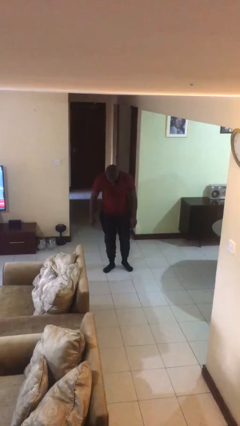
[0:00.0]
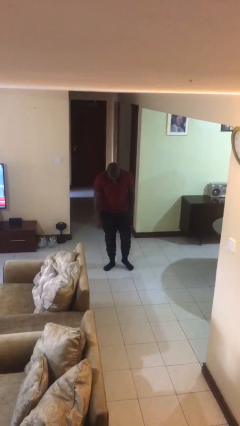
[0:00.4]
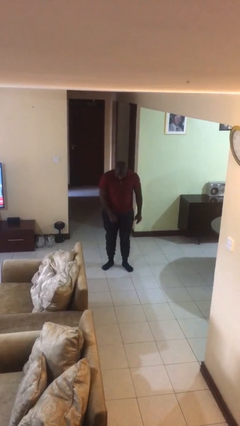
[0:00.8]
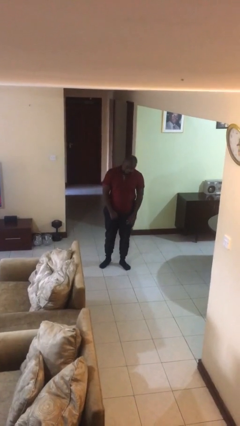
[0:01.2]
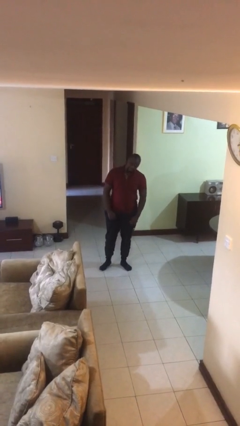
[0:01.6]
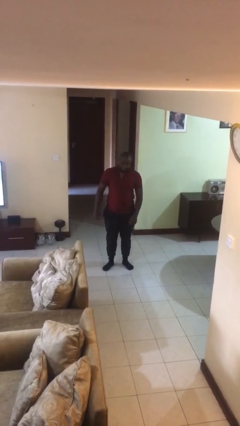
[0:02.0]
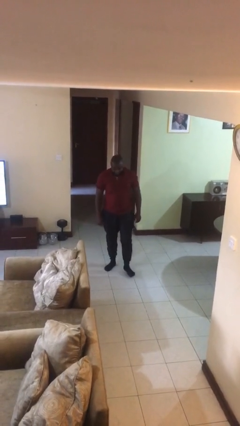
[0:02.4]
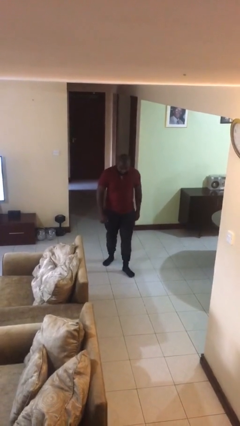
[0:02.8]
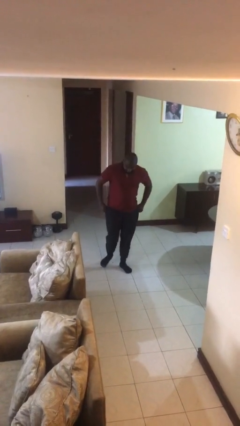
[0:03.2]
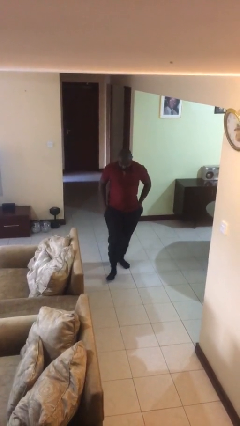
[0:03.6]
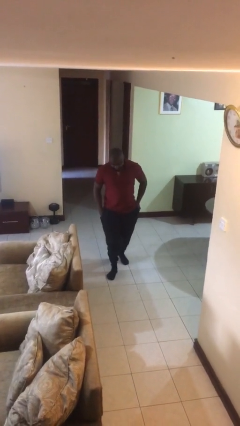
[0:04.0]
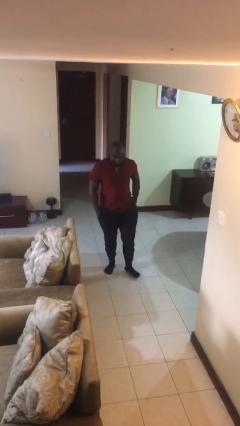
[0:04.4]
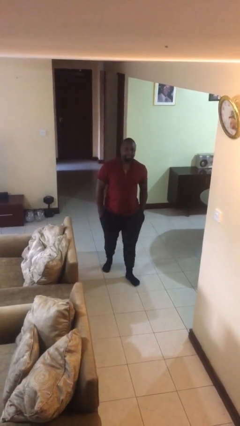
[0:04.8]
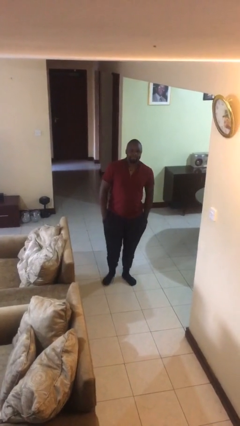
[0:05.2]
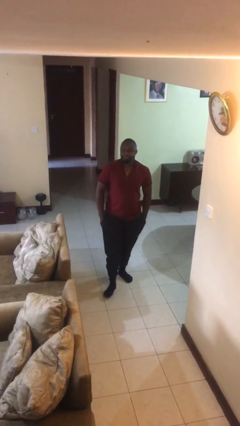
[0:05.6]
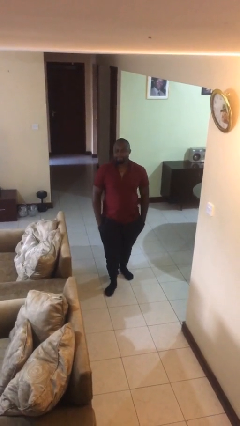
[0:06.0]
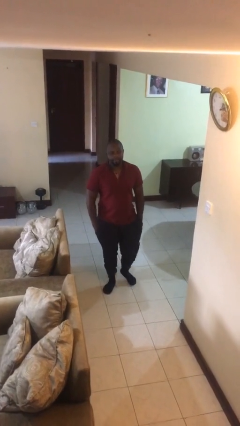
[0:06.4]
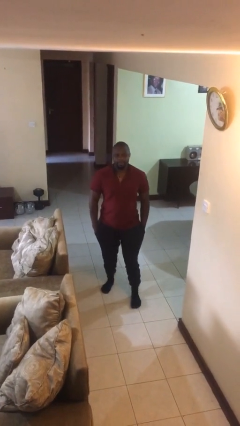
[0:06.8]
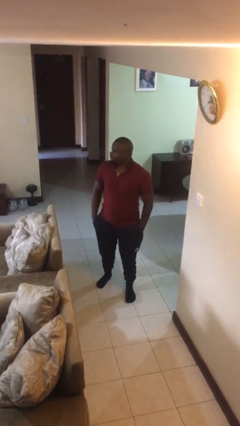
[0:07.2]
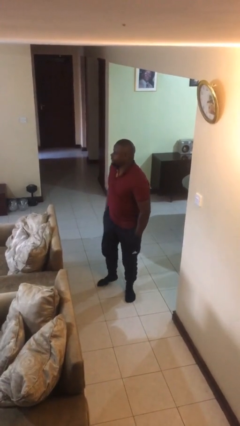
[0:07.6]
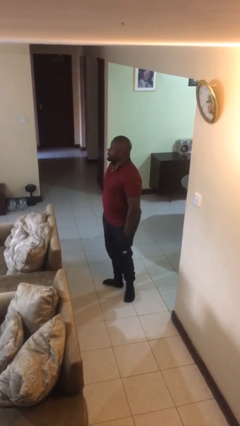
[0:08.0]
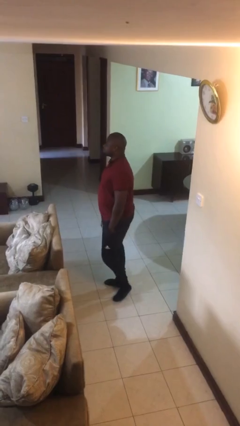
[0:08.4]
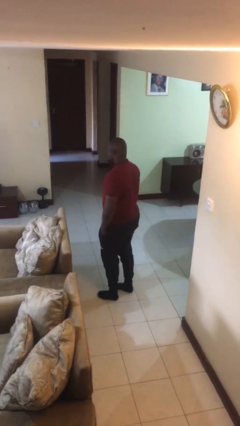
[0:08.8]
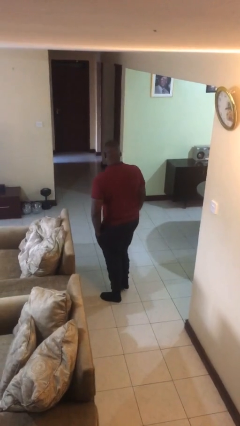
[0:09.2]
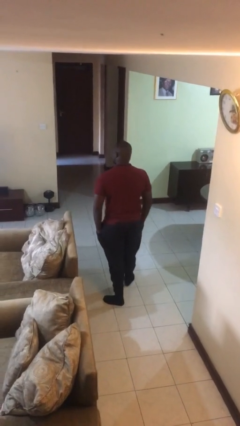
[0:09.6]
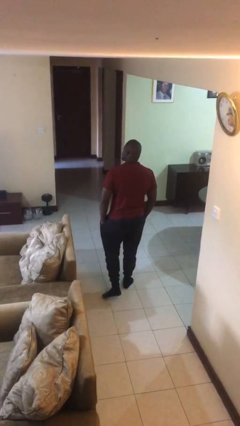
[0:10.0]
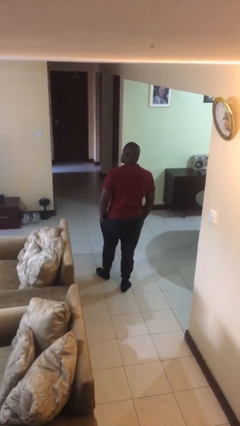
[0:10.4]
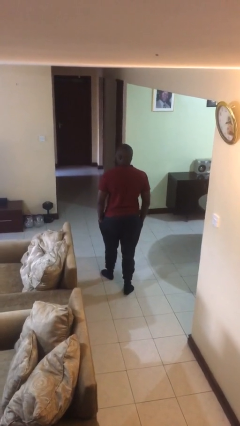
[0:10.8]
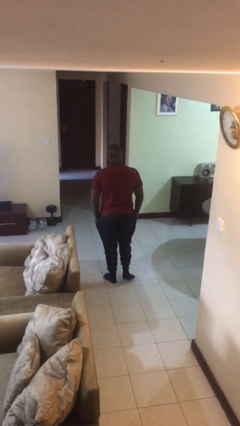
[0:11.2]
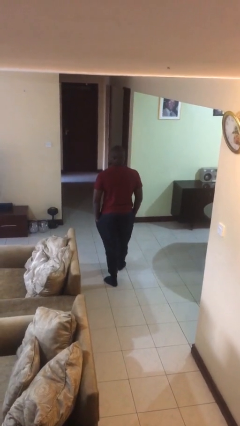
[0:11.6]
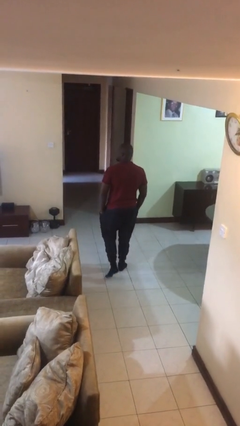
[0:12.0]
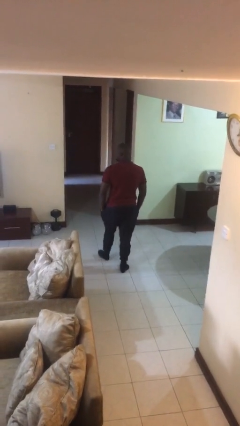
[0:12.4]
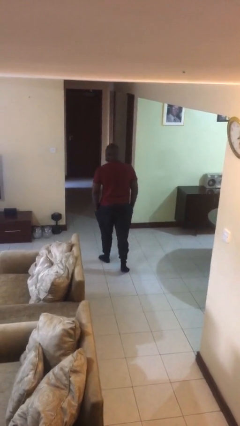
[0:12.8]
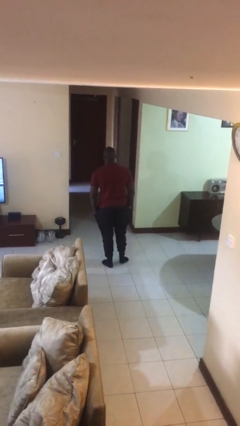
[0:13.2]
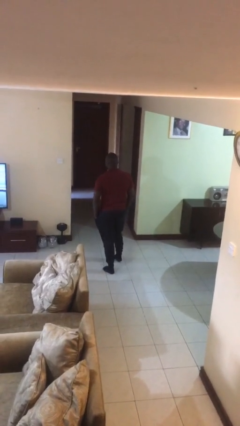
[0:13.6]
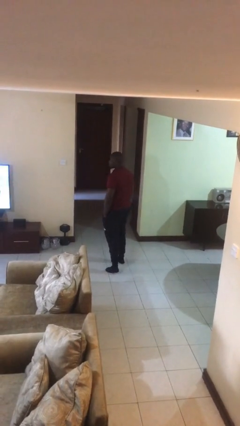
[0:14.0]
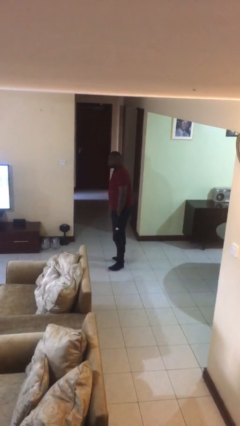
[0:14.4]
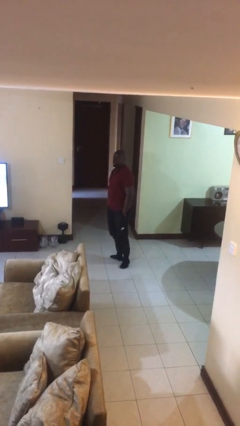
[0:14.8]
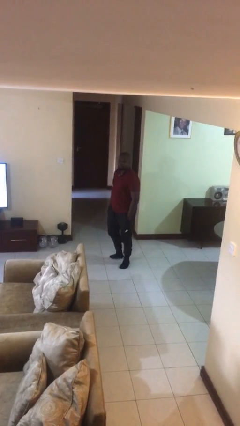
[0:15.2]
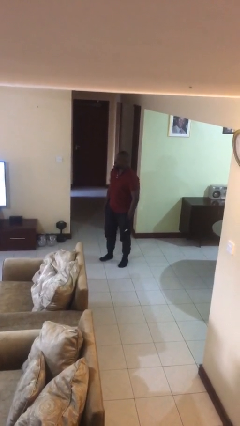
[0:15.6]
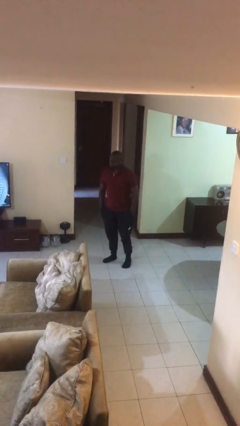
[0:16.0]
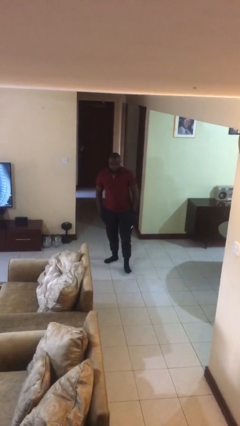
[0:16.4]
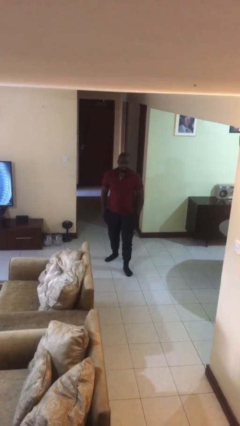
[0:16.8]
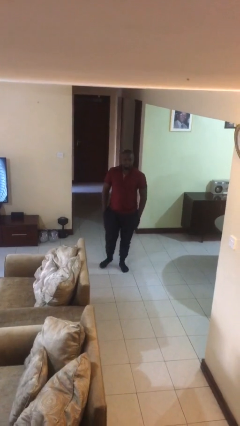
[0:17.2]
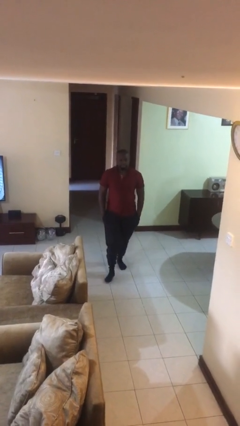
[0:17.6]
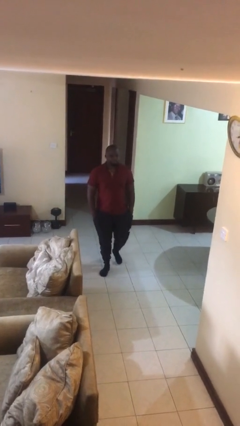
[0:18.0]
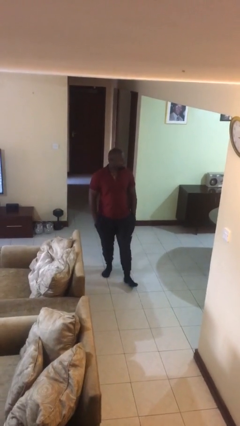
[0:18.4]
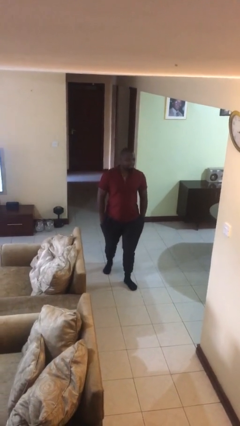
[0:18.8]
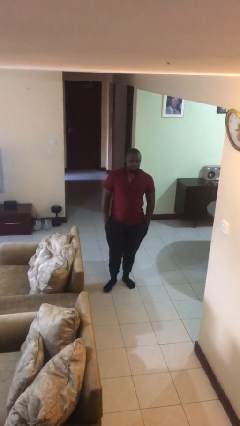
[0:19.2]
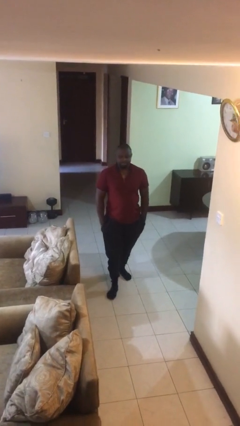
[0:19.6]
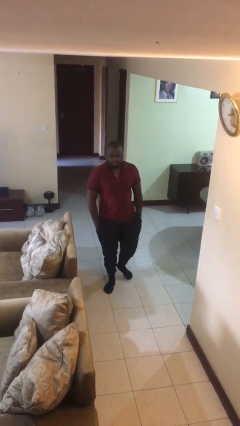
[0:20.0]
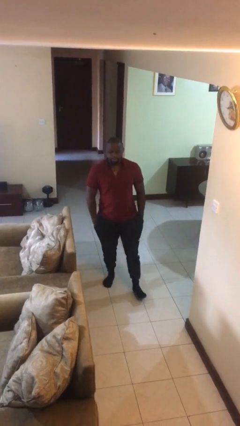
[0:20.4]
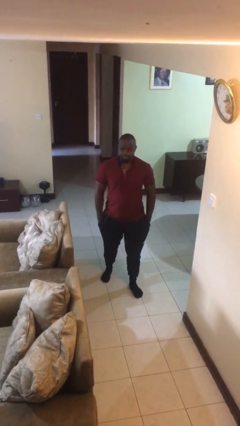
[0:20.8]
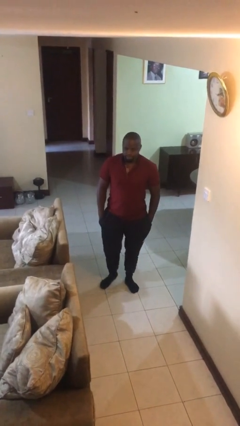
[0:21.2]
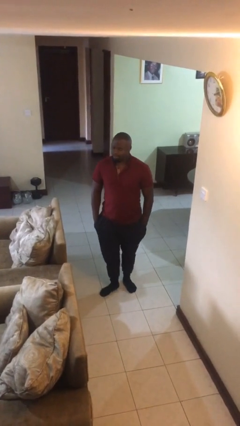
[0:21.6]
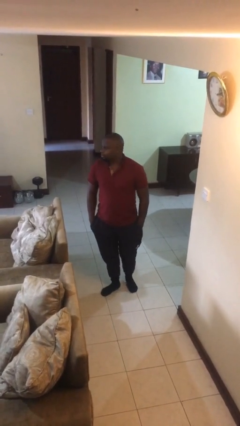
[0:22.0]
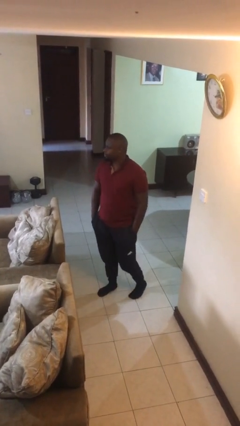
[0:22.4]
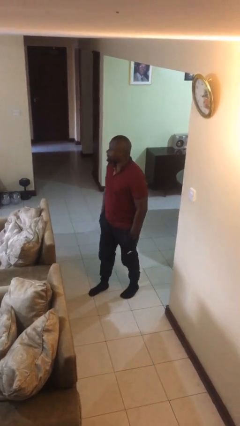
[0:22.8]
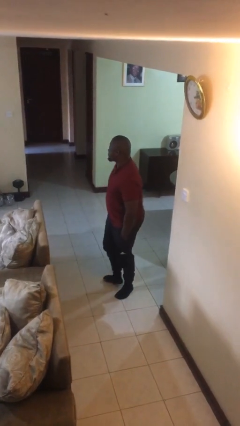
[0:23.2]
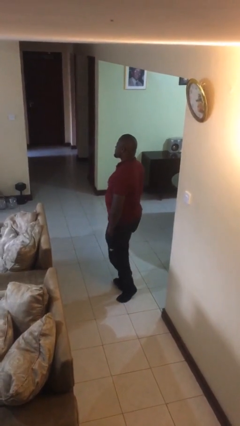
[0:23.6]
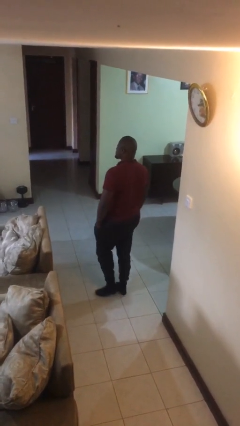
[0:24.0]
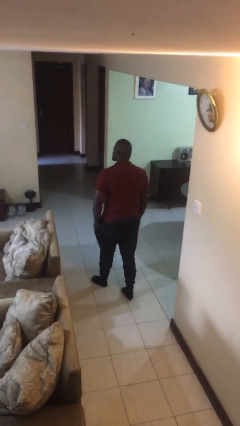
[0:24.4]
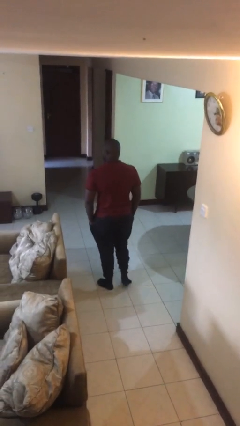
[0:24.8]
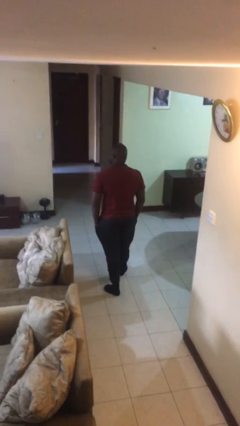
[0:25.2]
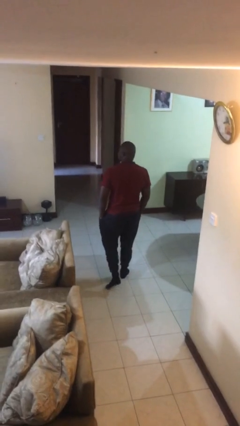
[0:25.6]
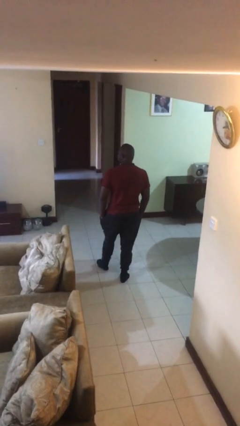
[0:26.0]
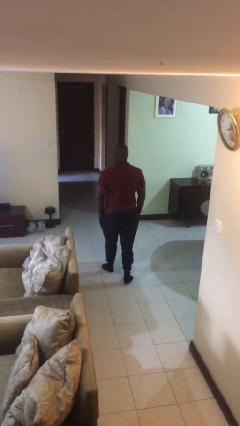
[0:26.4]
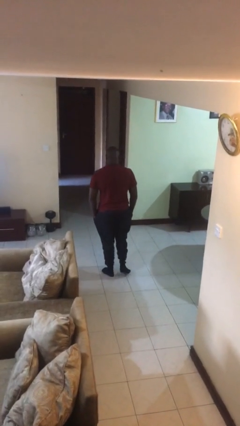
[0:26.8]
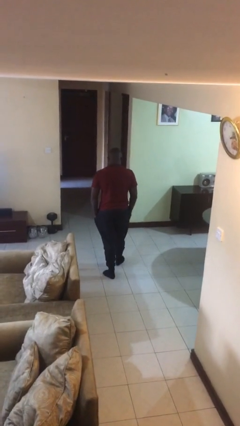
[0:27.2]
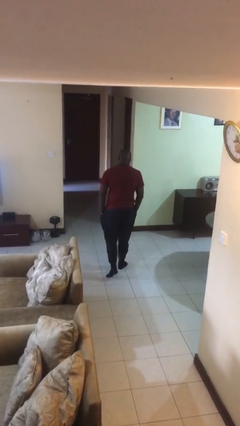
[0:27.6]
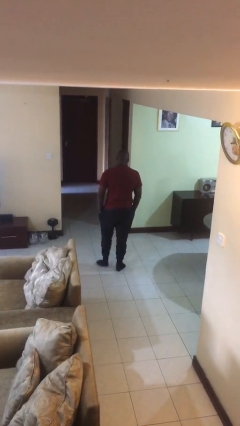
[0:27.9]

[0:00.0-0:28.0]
person walks

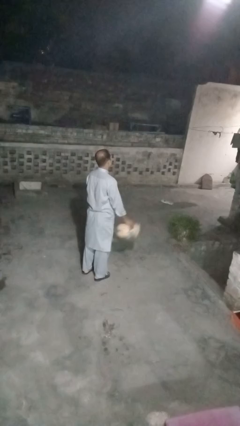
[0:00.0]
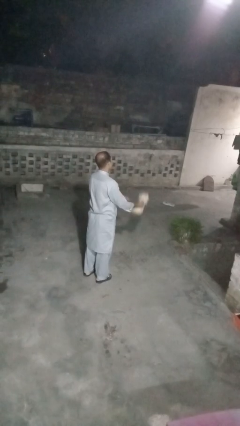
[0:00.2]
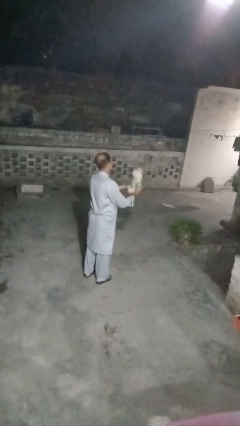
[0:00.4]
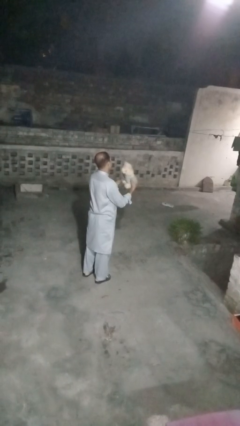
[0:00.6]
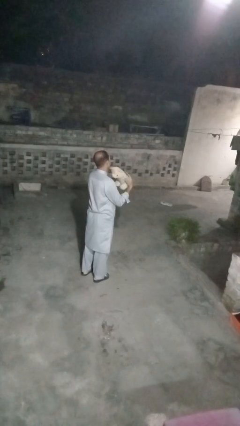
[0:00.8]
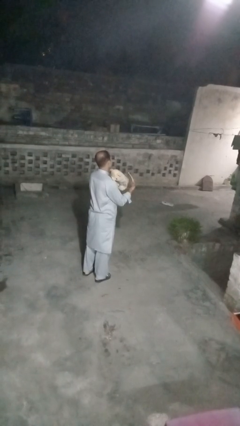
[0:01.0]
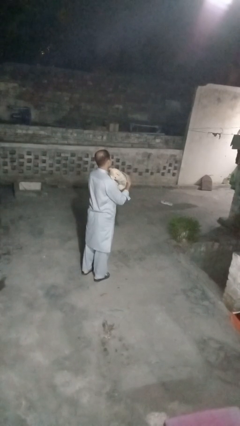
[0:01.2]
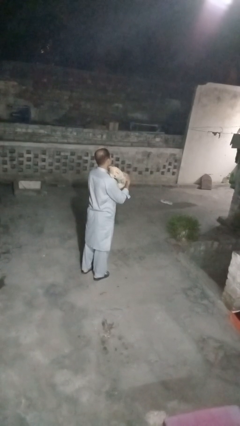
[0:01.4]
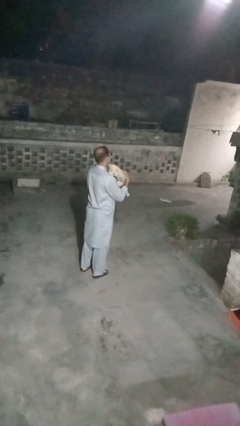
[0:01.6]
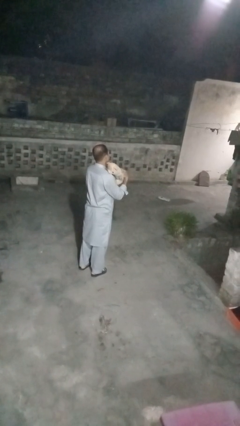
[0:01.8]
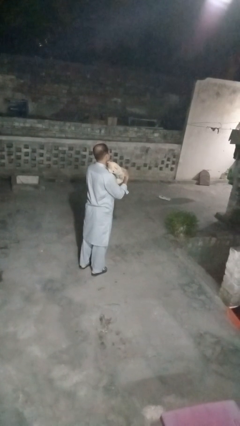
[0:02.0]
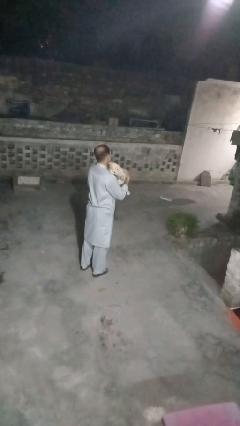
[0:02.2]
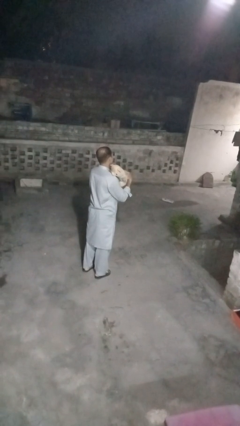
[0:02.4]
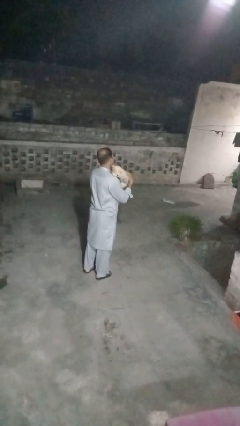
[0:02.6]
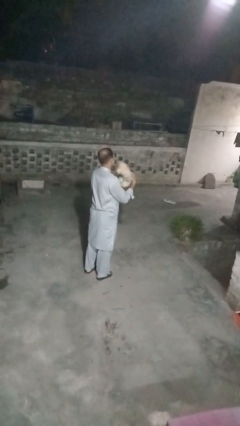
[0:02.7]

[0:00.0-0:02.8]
person hugs stuffed animal

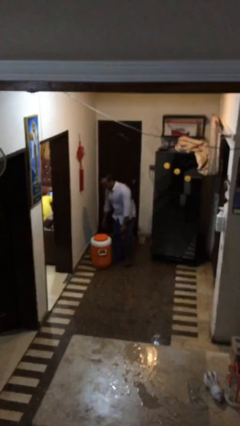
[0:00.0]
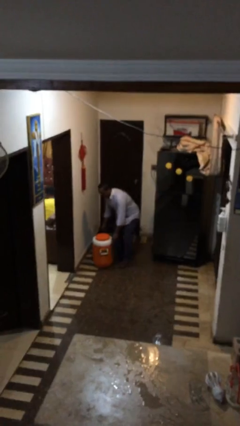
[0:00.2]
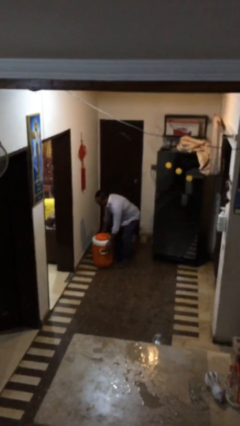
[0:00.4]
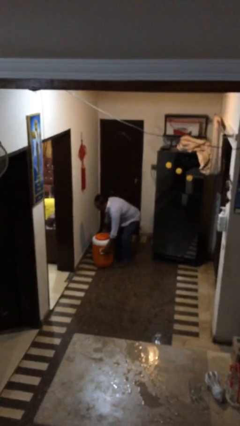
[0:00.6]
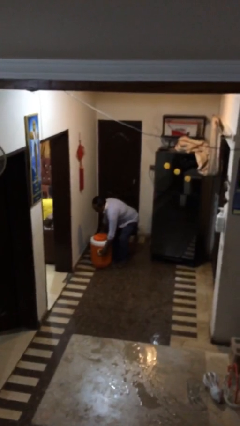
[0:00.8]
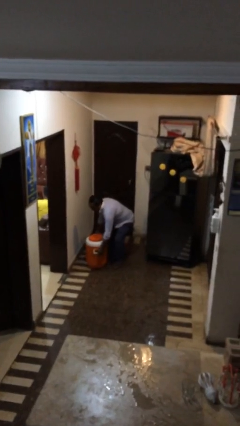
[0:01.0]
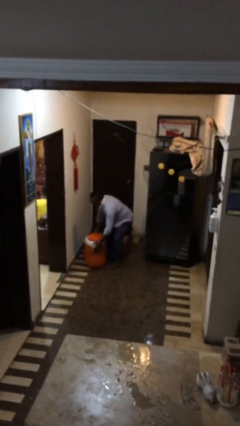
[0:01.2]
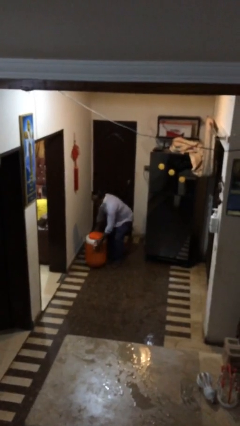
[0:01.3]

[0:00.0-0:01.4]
person picks up object from floor
